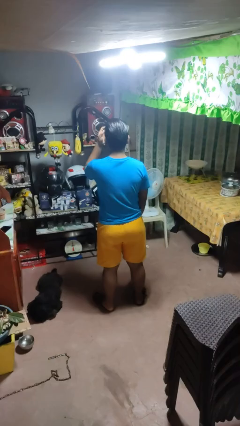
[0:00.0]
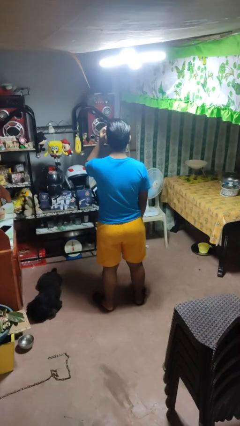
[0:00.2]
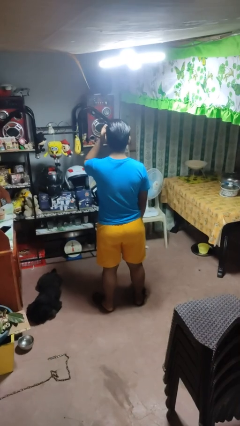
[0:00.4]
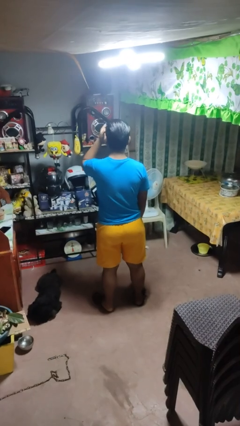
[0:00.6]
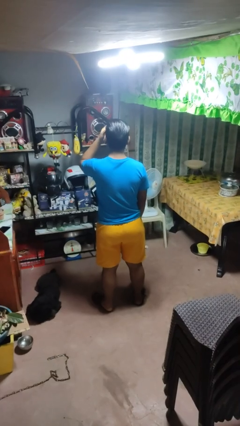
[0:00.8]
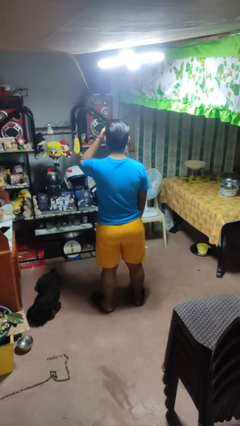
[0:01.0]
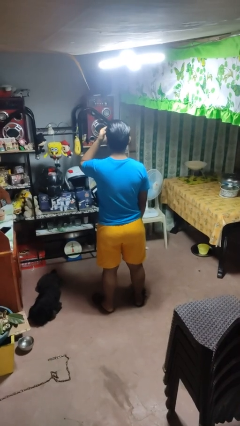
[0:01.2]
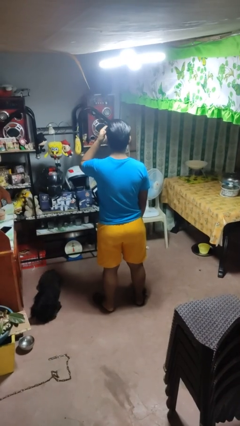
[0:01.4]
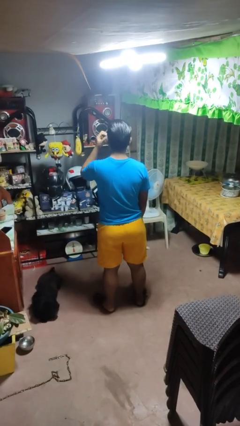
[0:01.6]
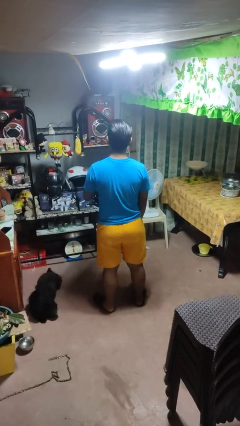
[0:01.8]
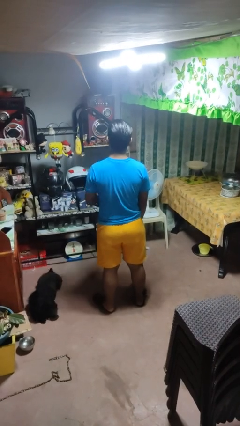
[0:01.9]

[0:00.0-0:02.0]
person scratches face

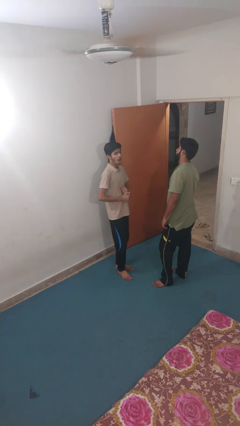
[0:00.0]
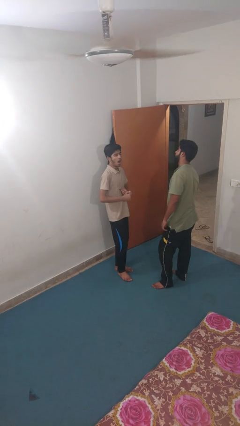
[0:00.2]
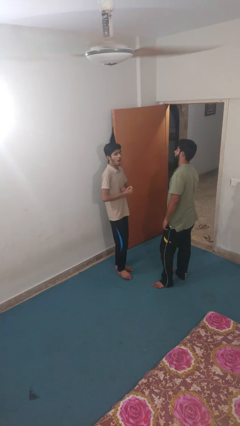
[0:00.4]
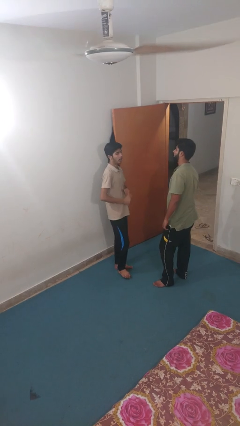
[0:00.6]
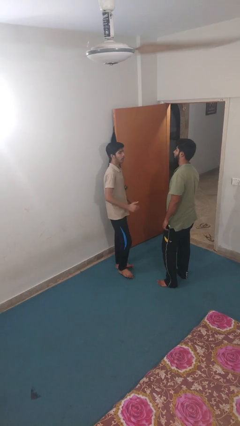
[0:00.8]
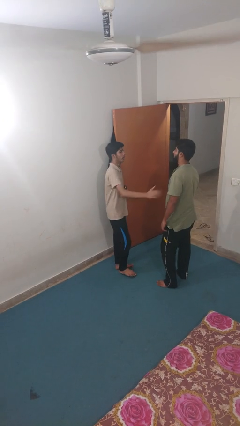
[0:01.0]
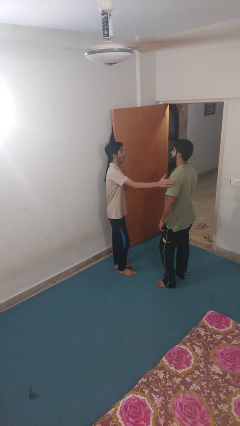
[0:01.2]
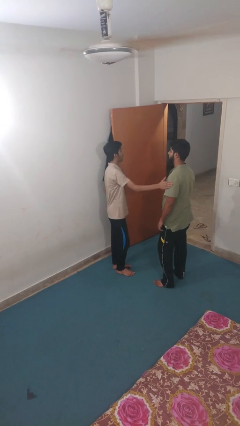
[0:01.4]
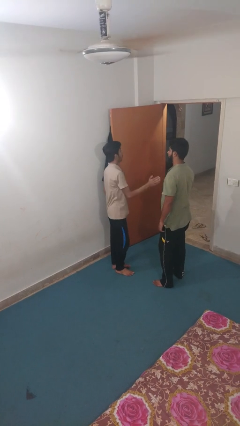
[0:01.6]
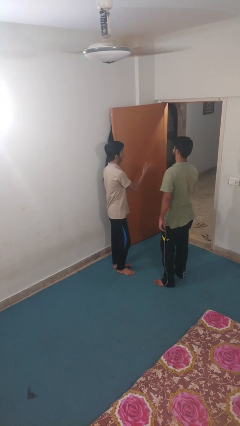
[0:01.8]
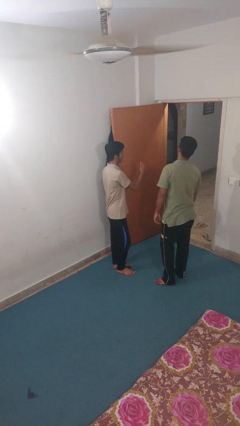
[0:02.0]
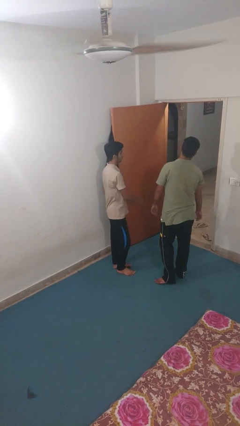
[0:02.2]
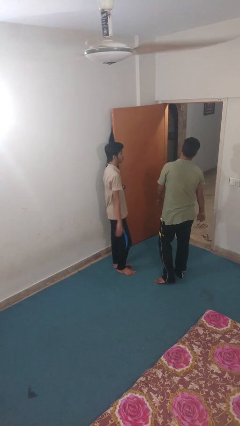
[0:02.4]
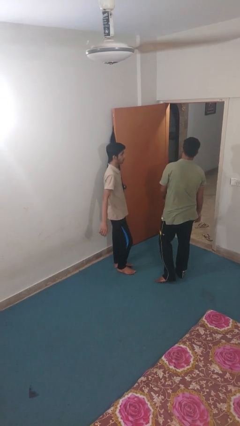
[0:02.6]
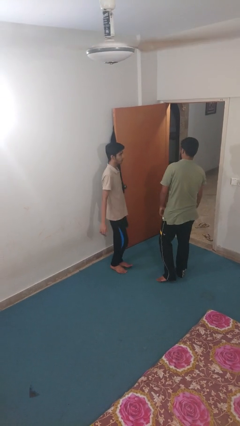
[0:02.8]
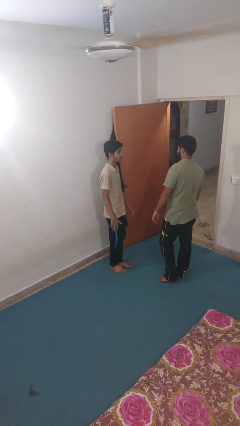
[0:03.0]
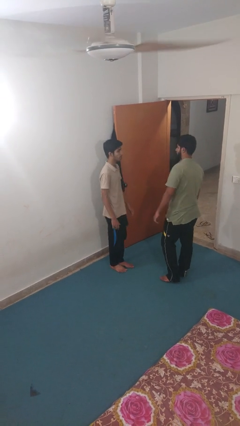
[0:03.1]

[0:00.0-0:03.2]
person shoves person

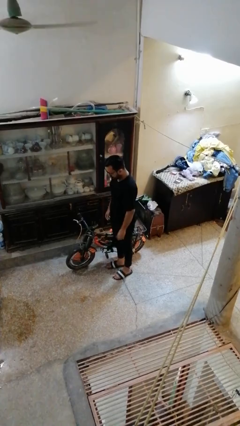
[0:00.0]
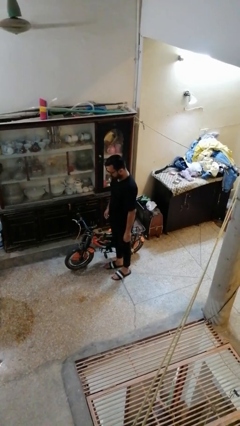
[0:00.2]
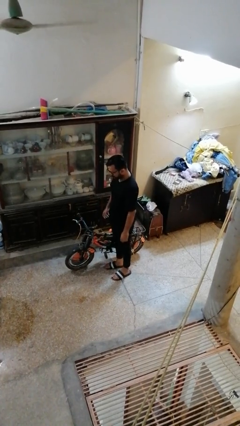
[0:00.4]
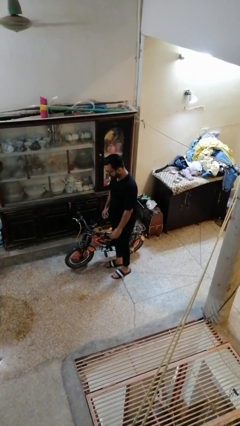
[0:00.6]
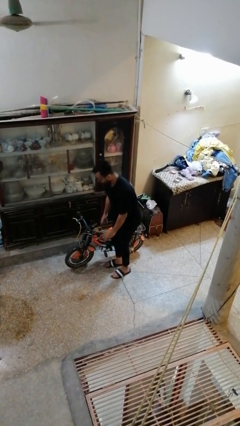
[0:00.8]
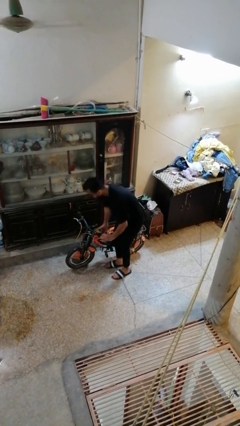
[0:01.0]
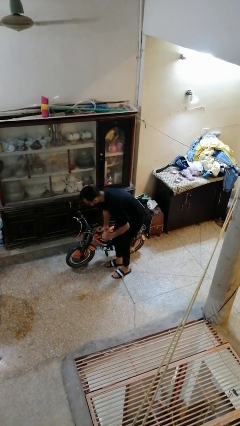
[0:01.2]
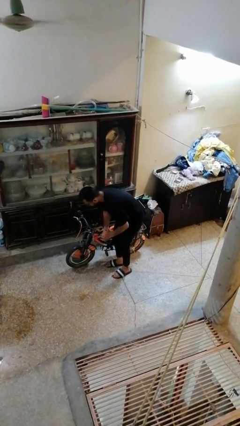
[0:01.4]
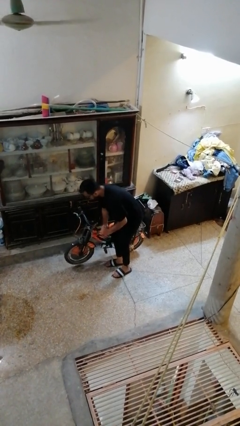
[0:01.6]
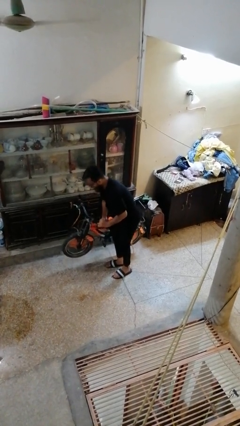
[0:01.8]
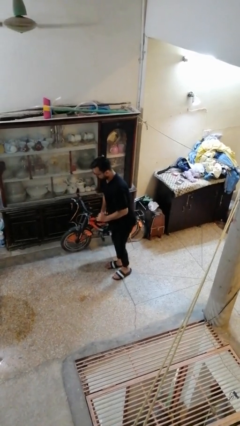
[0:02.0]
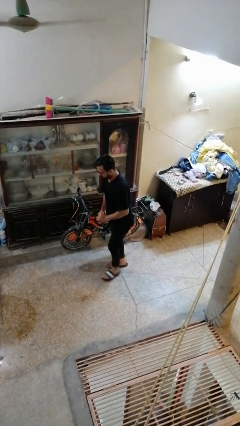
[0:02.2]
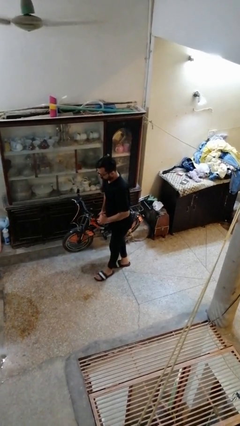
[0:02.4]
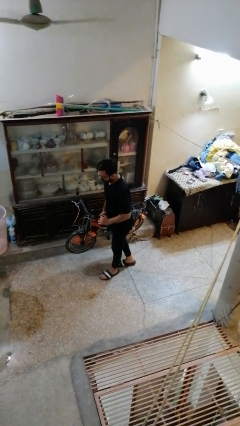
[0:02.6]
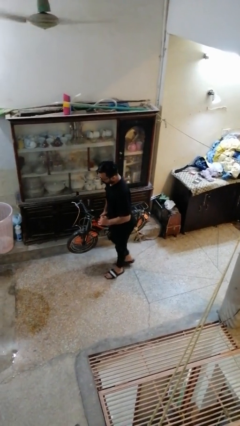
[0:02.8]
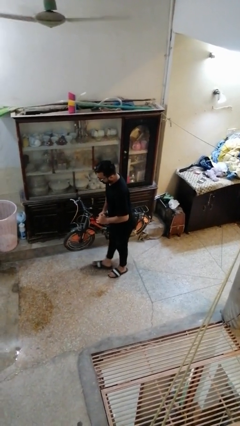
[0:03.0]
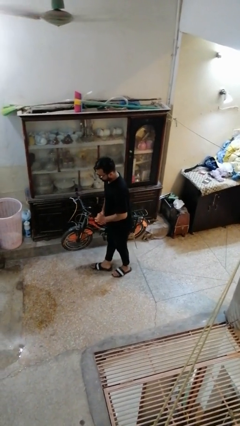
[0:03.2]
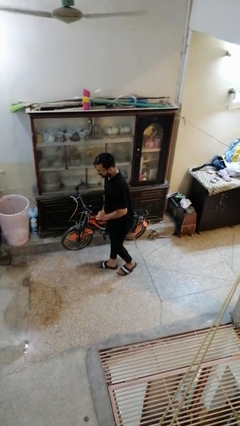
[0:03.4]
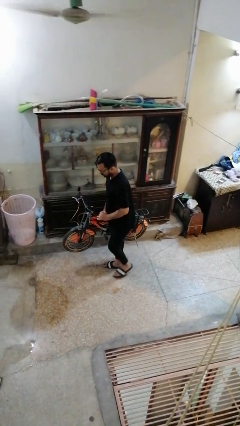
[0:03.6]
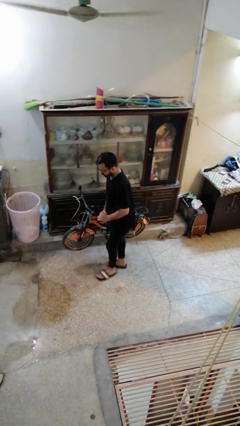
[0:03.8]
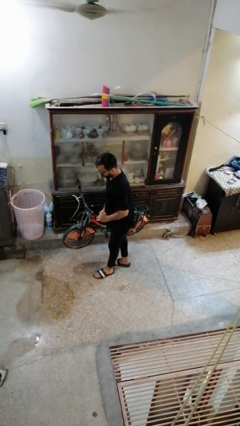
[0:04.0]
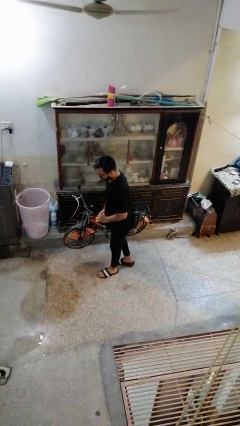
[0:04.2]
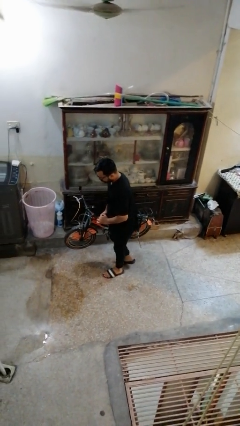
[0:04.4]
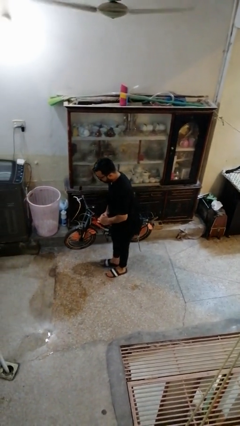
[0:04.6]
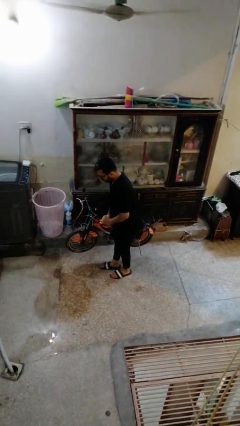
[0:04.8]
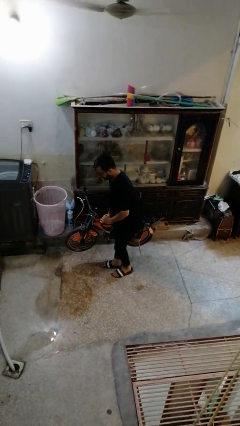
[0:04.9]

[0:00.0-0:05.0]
person carries bicycle

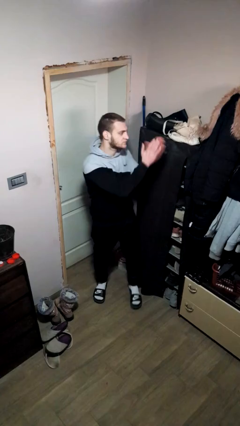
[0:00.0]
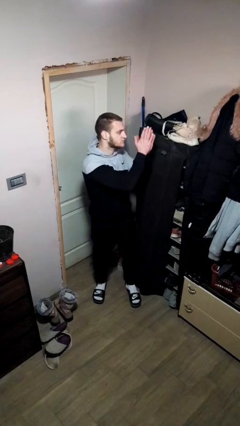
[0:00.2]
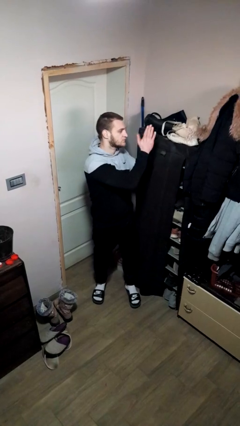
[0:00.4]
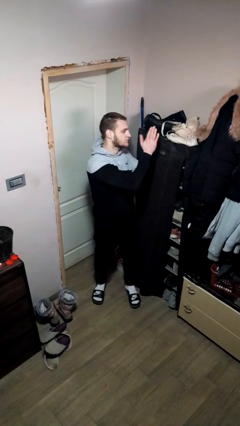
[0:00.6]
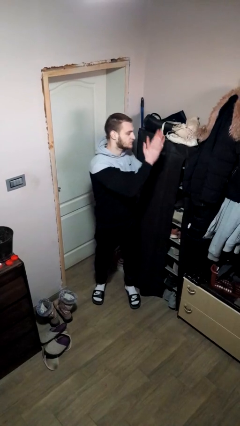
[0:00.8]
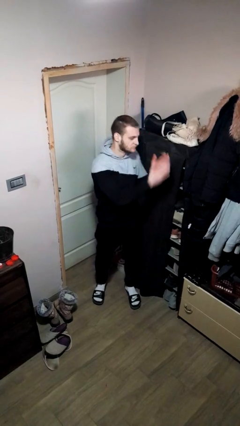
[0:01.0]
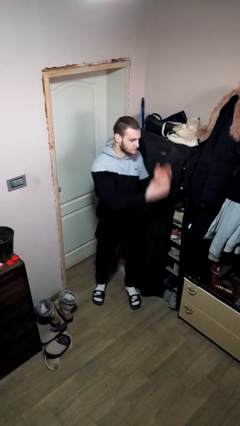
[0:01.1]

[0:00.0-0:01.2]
person claps hands

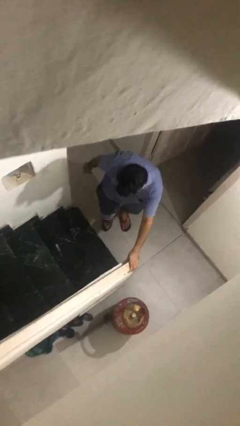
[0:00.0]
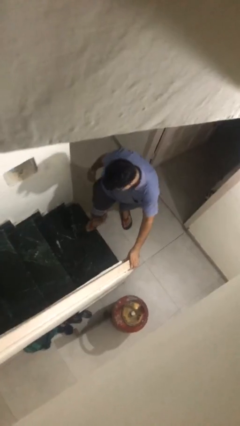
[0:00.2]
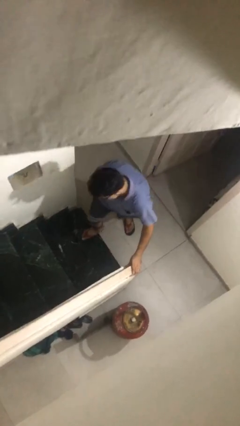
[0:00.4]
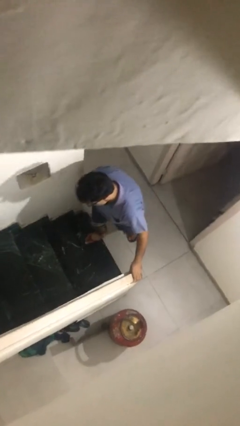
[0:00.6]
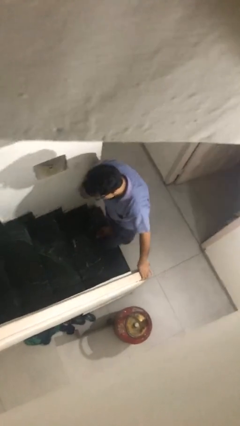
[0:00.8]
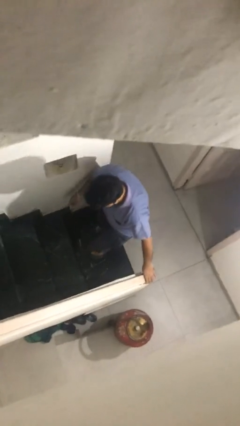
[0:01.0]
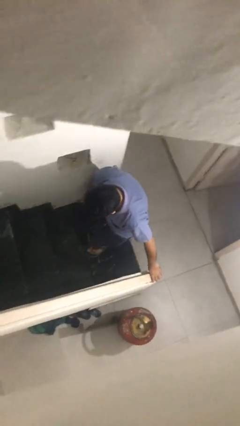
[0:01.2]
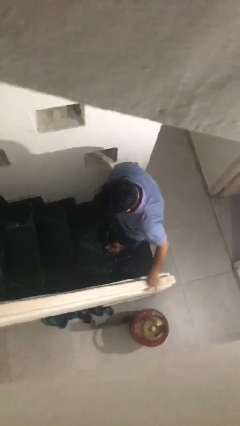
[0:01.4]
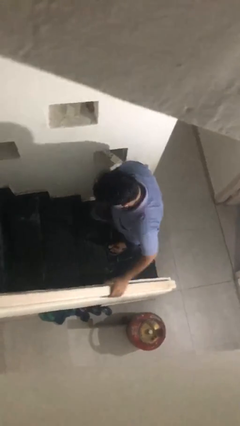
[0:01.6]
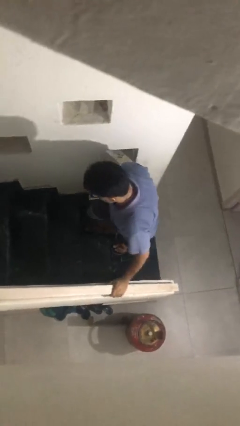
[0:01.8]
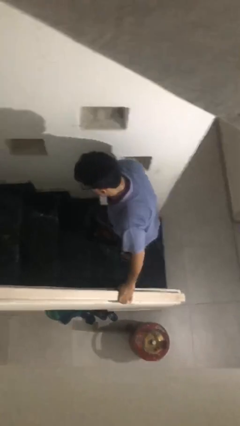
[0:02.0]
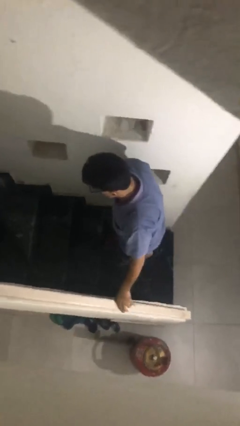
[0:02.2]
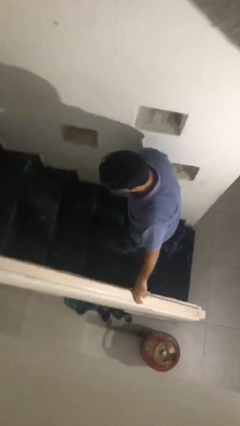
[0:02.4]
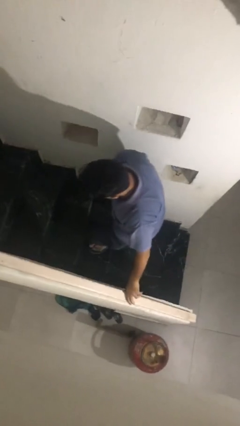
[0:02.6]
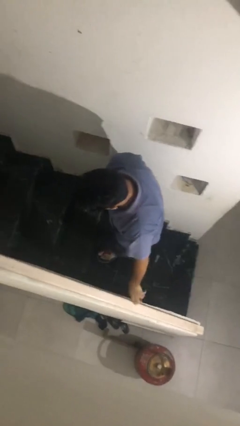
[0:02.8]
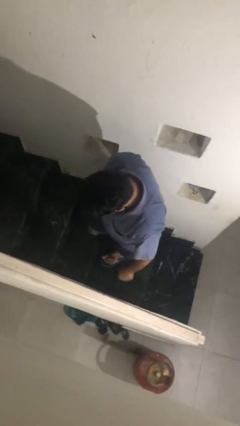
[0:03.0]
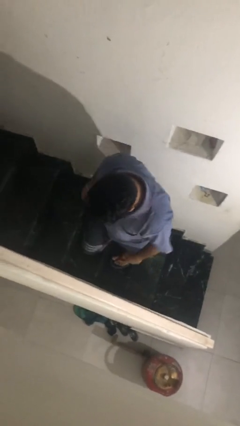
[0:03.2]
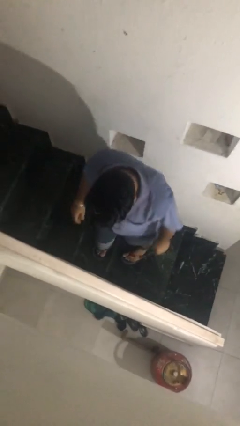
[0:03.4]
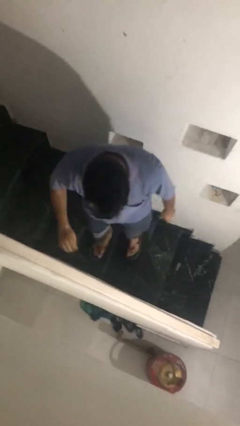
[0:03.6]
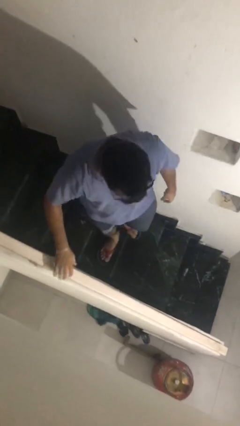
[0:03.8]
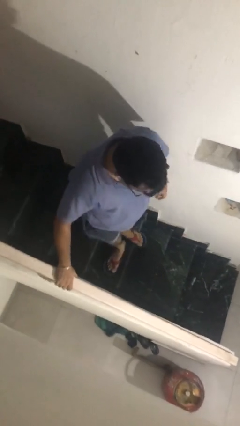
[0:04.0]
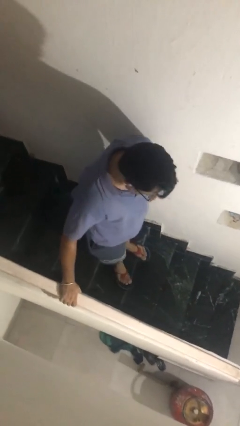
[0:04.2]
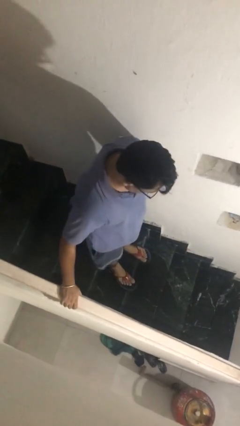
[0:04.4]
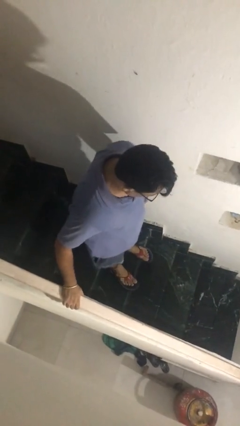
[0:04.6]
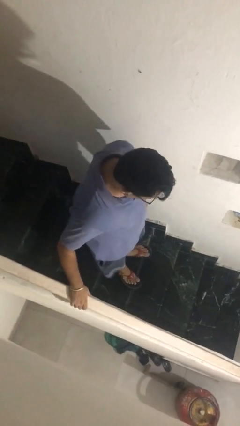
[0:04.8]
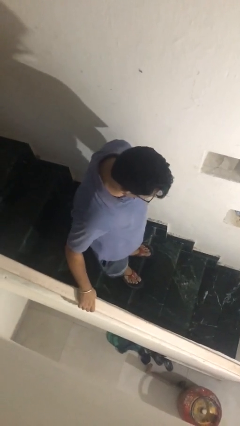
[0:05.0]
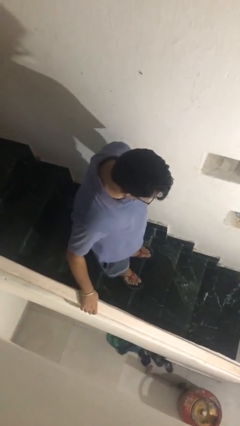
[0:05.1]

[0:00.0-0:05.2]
person climbs up stairs

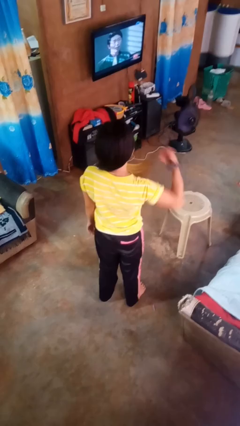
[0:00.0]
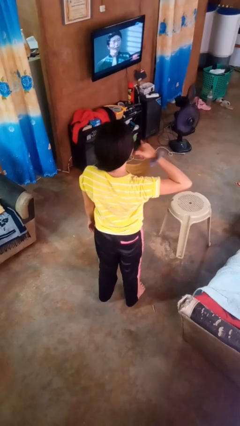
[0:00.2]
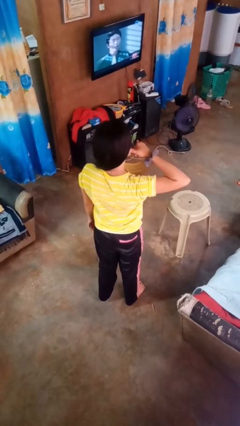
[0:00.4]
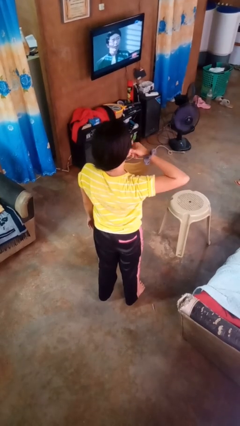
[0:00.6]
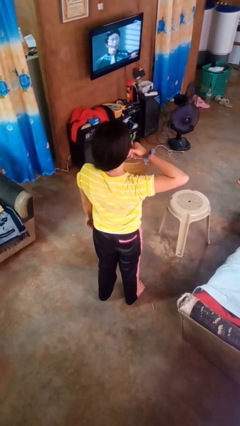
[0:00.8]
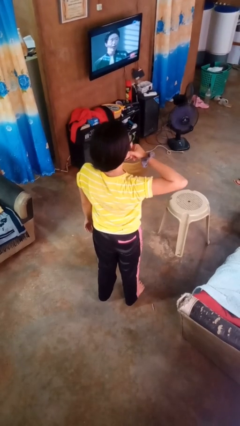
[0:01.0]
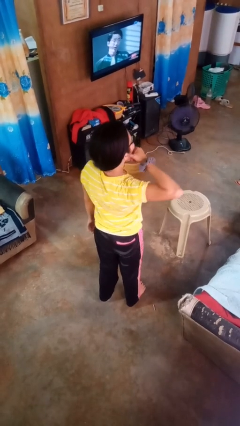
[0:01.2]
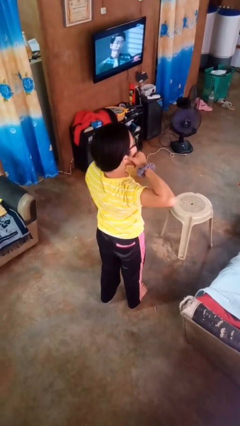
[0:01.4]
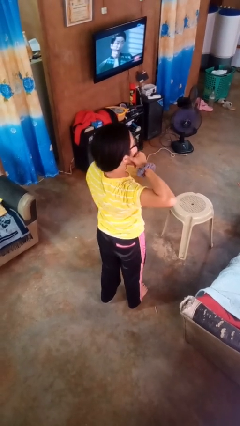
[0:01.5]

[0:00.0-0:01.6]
person gestures call me
